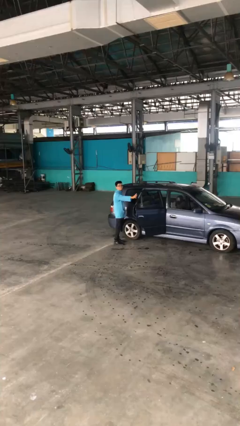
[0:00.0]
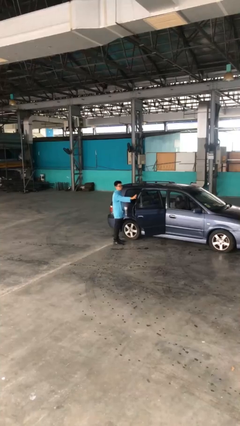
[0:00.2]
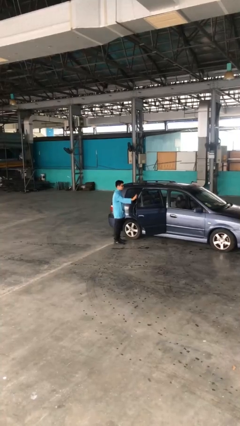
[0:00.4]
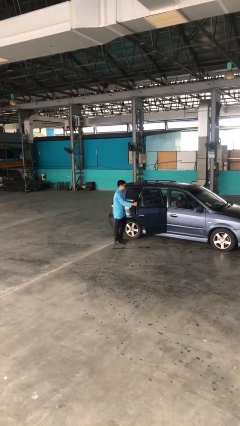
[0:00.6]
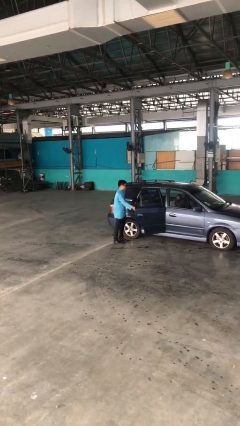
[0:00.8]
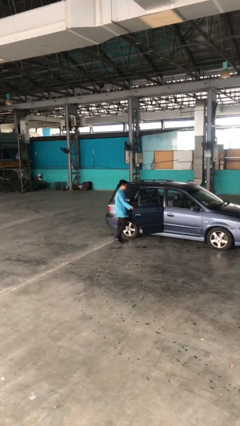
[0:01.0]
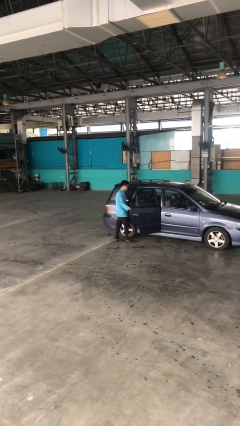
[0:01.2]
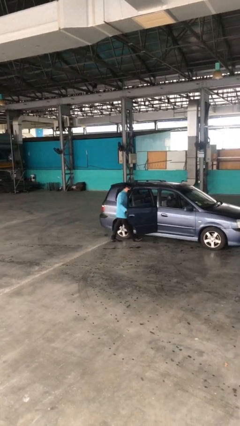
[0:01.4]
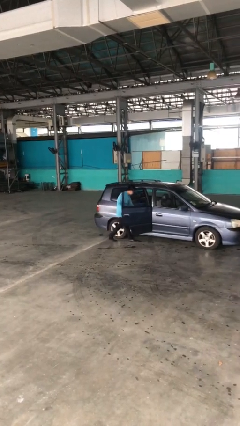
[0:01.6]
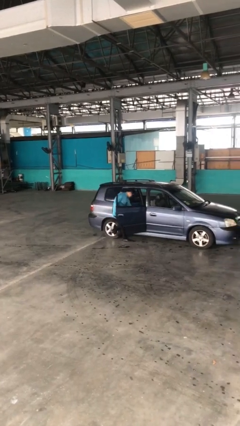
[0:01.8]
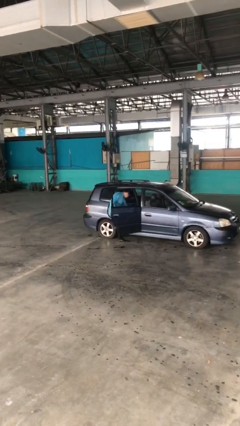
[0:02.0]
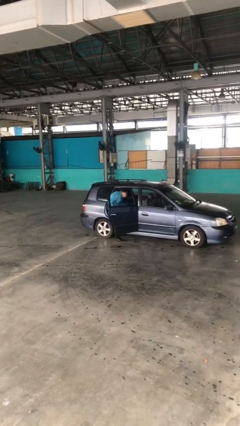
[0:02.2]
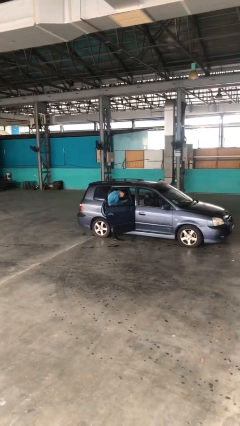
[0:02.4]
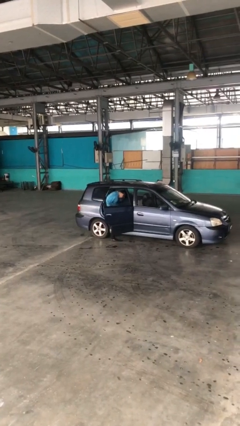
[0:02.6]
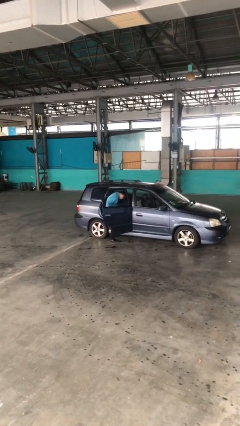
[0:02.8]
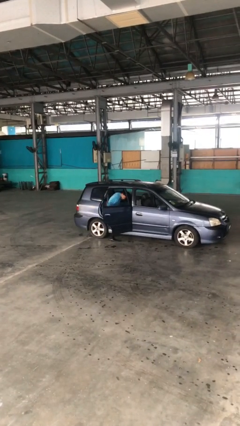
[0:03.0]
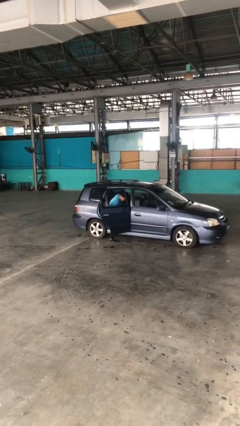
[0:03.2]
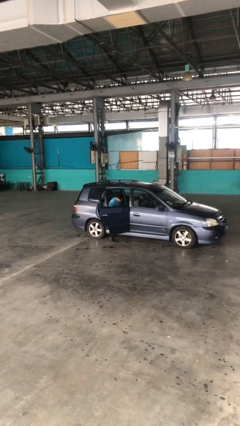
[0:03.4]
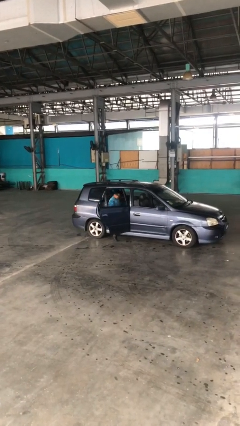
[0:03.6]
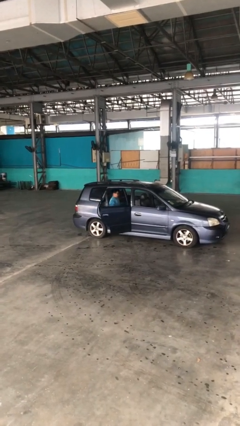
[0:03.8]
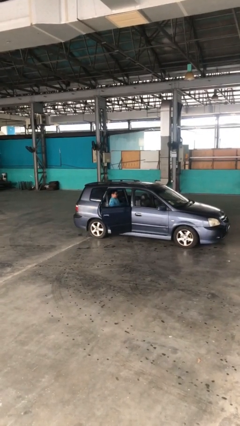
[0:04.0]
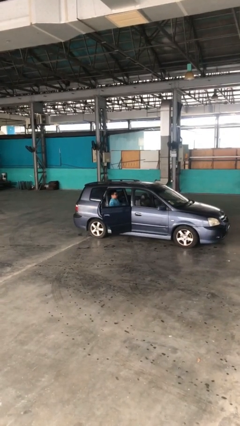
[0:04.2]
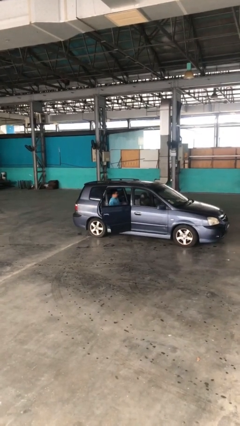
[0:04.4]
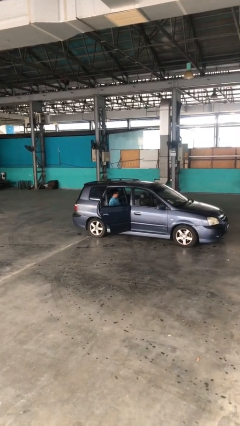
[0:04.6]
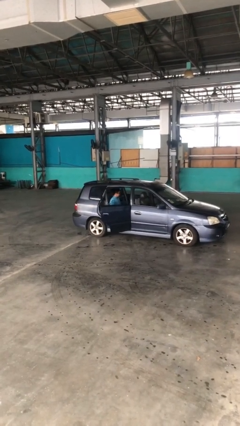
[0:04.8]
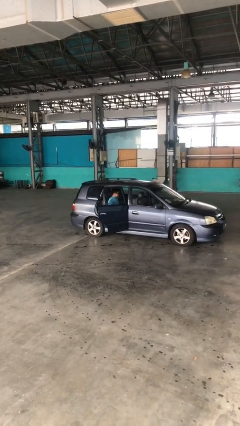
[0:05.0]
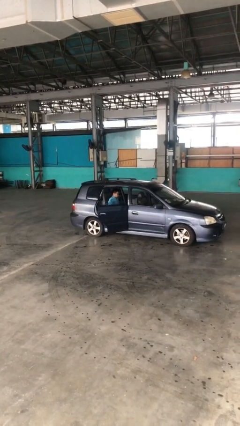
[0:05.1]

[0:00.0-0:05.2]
person enters car

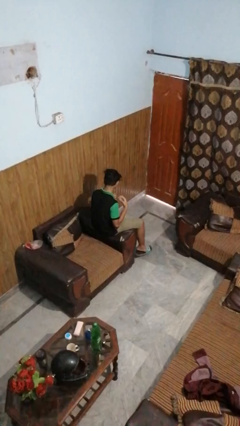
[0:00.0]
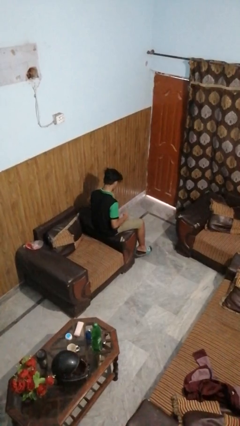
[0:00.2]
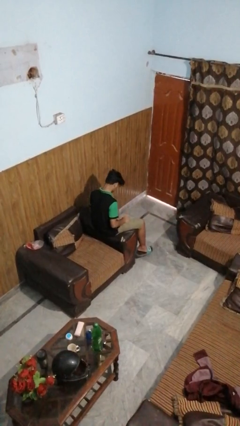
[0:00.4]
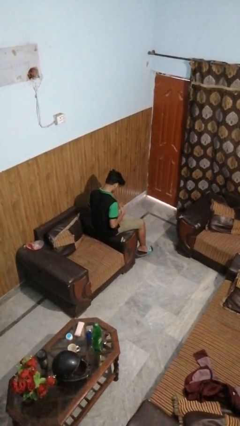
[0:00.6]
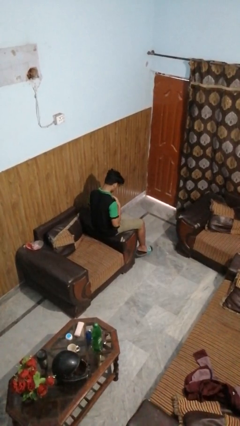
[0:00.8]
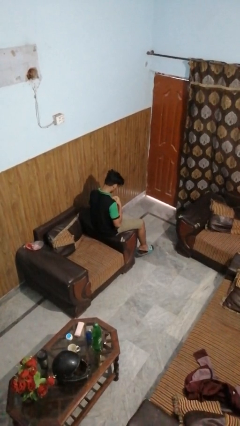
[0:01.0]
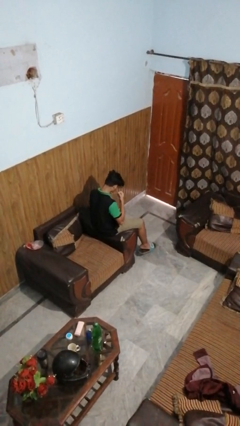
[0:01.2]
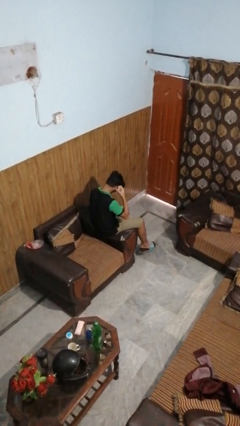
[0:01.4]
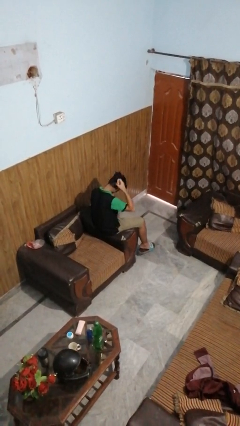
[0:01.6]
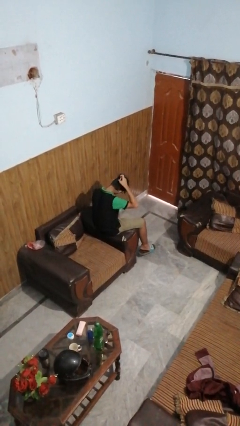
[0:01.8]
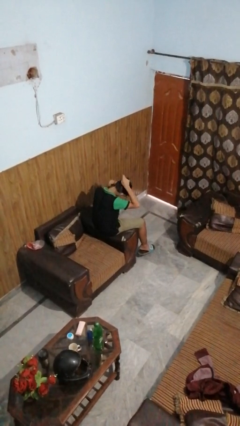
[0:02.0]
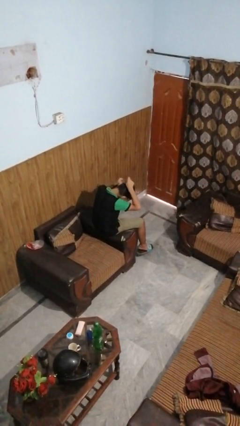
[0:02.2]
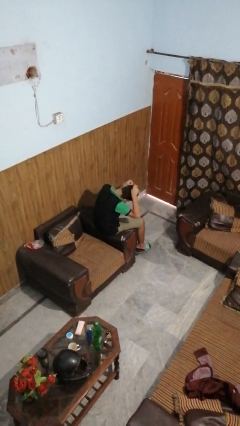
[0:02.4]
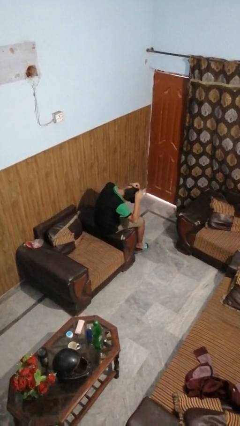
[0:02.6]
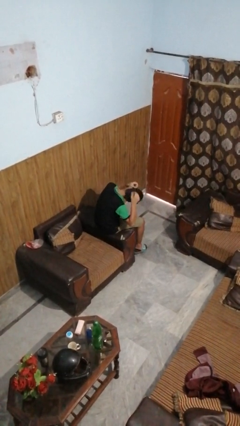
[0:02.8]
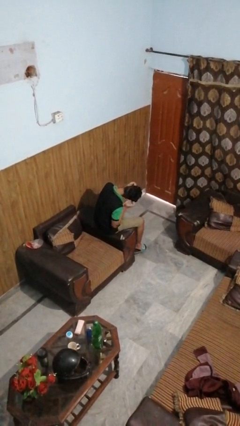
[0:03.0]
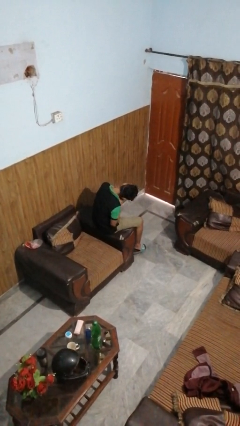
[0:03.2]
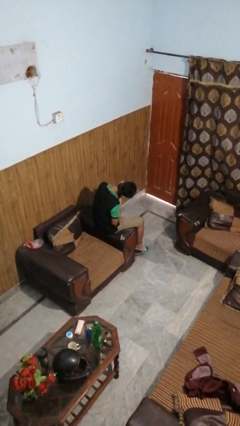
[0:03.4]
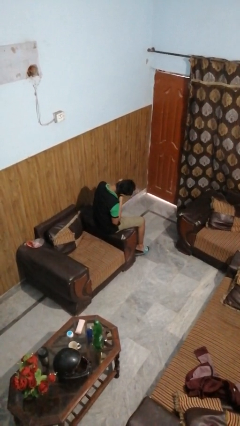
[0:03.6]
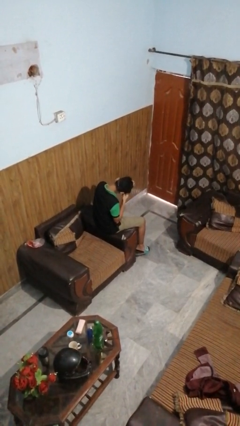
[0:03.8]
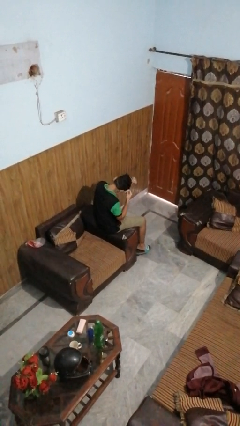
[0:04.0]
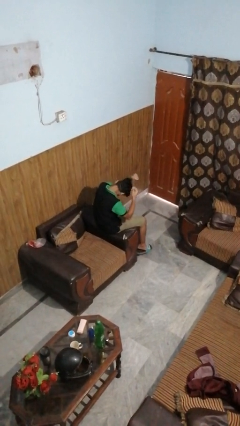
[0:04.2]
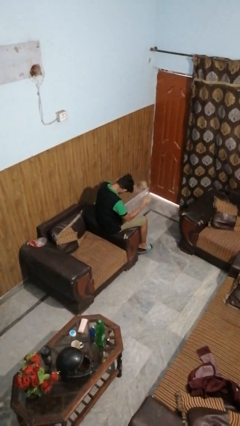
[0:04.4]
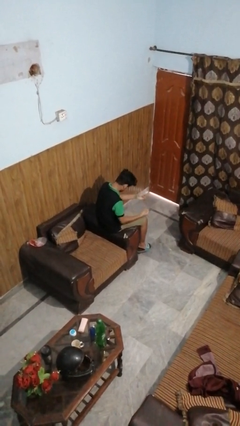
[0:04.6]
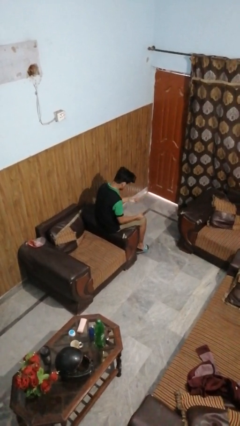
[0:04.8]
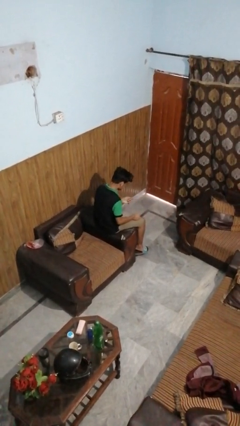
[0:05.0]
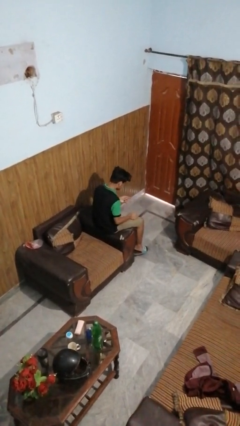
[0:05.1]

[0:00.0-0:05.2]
person takes off necklace

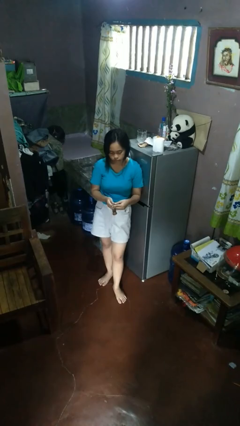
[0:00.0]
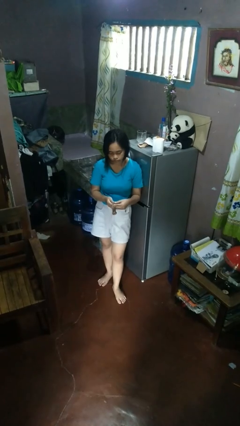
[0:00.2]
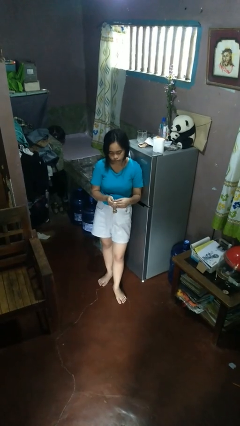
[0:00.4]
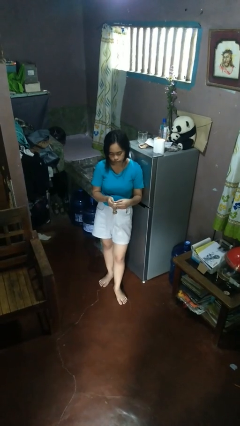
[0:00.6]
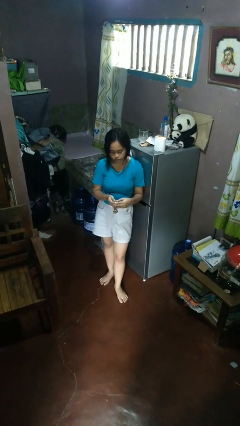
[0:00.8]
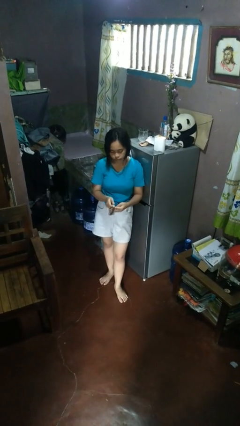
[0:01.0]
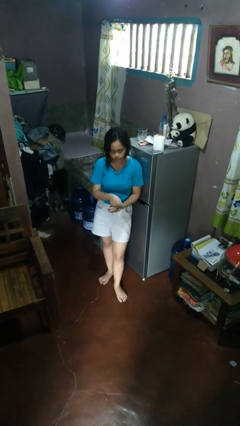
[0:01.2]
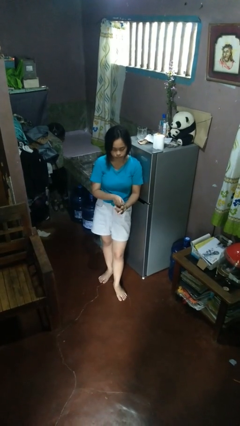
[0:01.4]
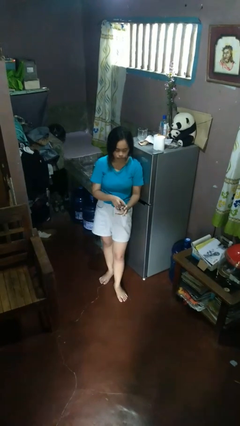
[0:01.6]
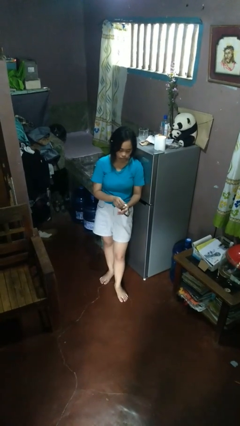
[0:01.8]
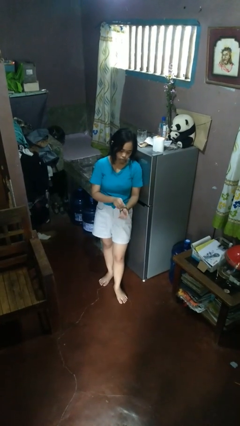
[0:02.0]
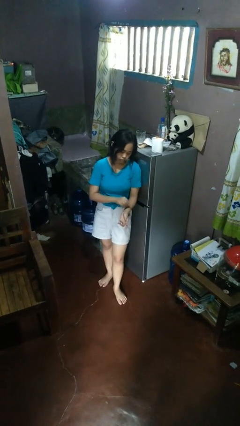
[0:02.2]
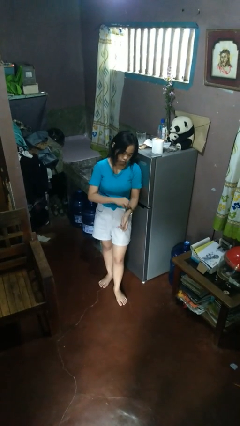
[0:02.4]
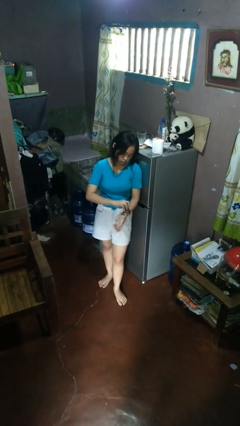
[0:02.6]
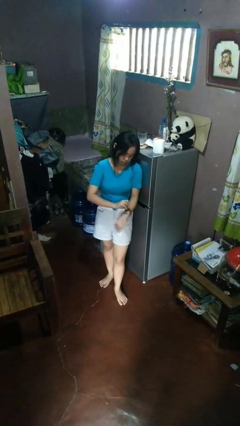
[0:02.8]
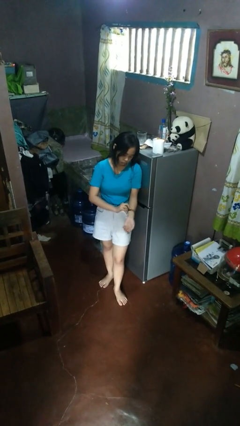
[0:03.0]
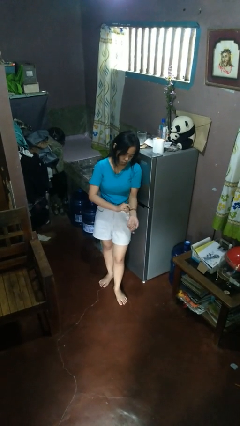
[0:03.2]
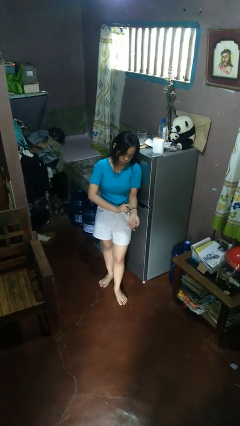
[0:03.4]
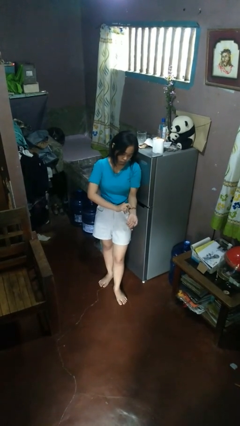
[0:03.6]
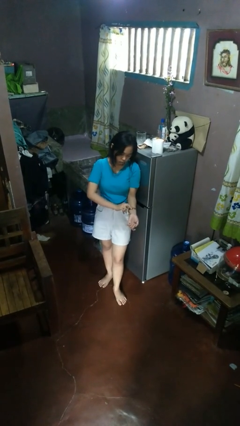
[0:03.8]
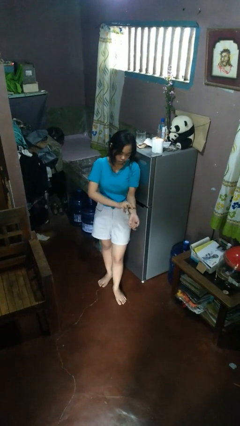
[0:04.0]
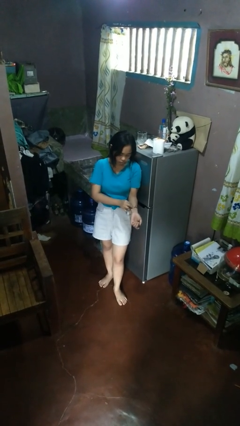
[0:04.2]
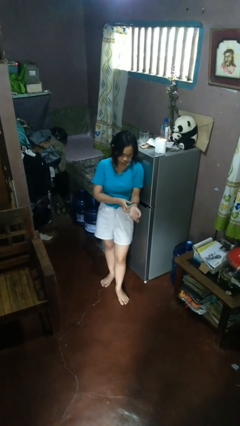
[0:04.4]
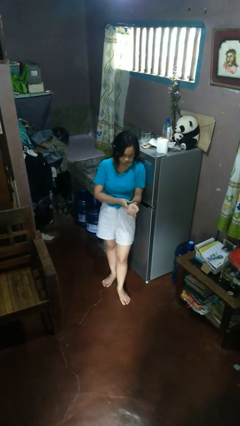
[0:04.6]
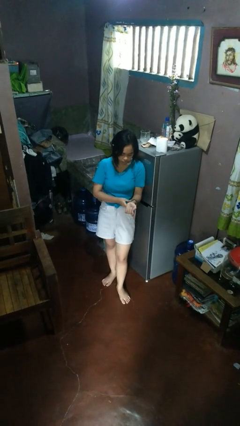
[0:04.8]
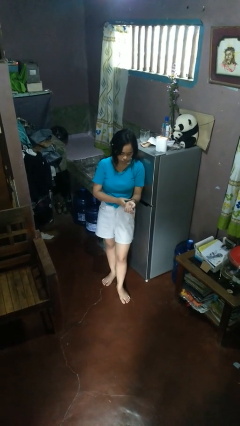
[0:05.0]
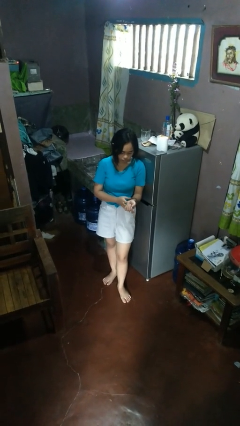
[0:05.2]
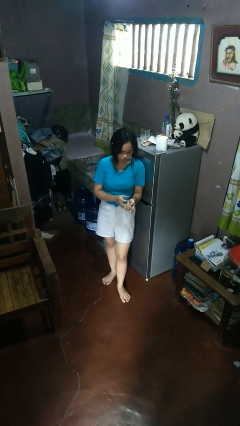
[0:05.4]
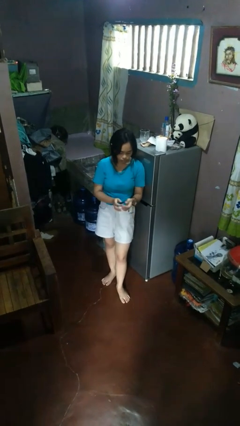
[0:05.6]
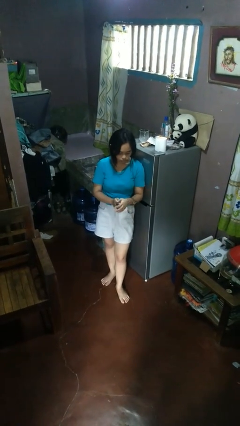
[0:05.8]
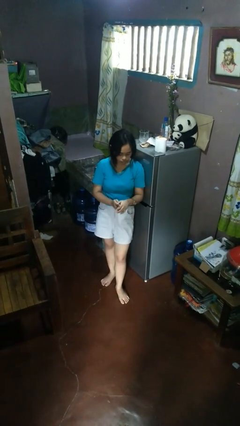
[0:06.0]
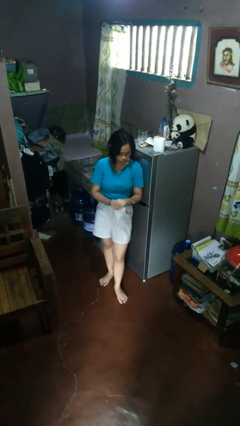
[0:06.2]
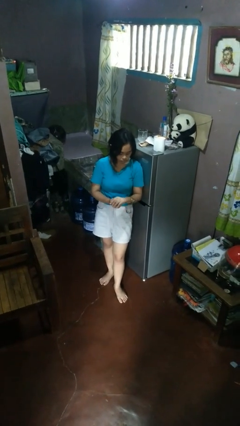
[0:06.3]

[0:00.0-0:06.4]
person puts on wristwatch

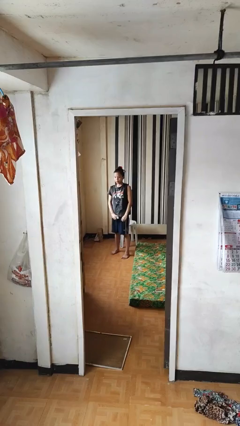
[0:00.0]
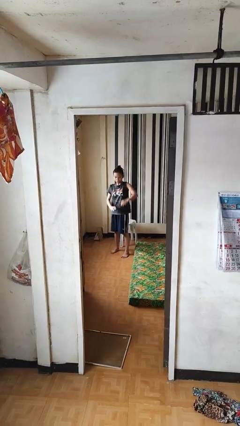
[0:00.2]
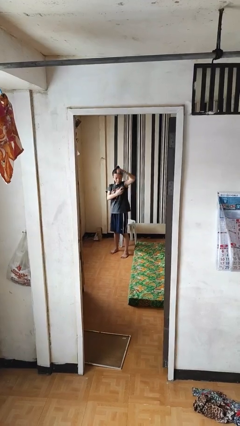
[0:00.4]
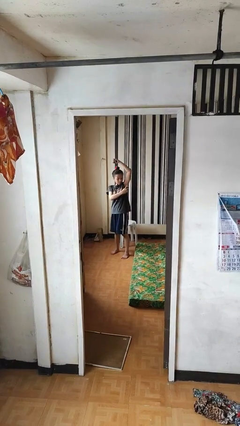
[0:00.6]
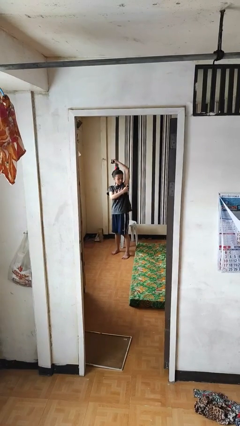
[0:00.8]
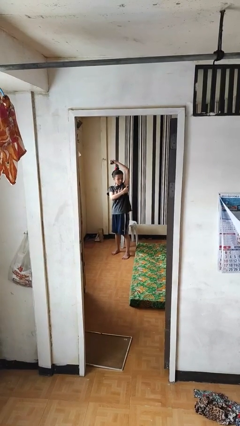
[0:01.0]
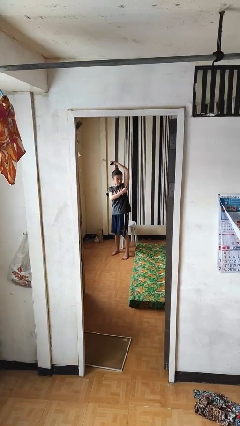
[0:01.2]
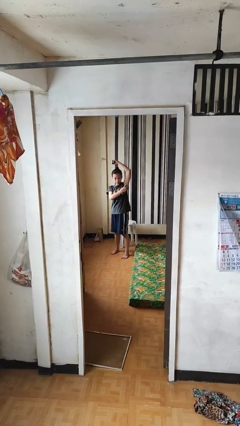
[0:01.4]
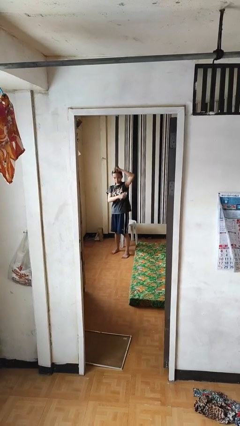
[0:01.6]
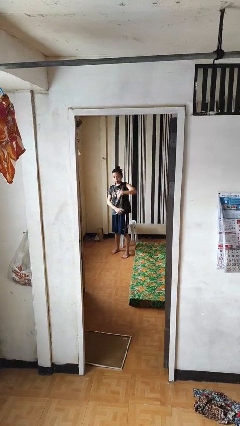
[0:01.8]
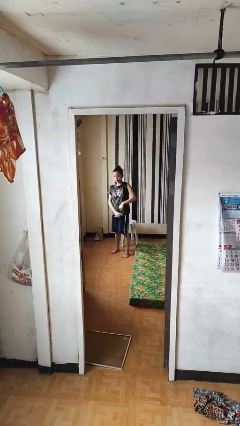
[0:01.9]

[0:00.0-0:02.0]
person applies deodorant
